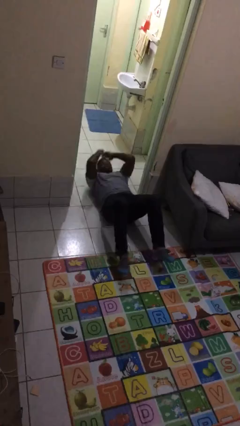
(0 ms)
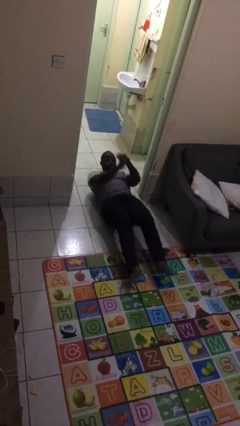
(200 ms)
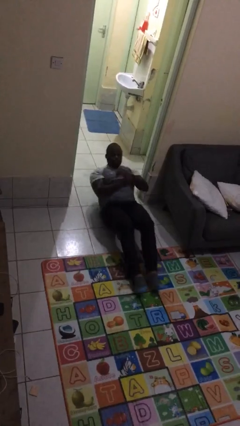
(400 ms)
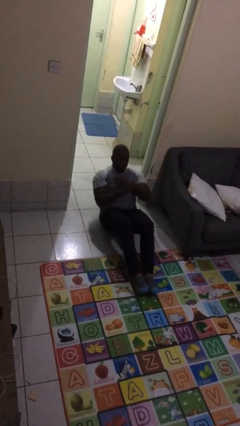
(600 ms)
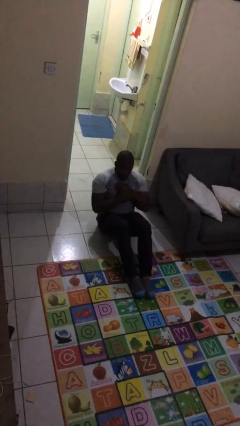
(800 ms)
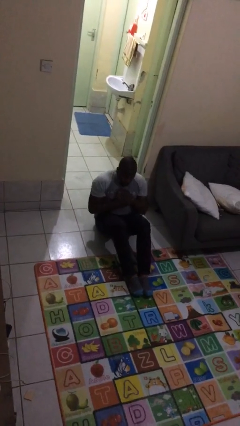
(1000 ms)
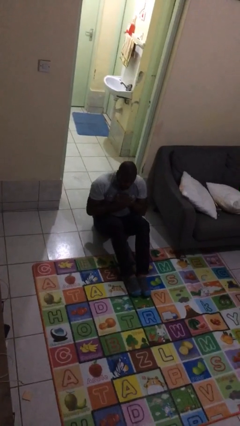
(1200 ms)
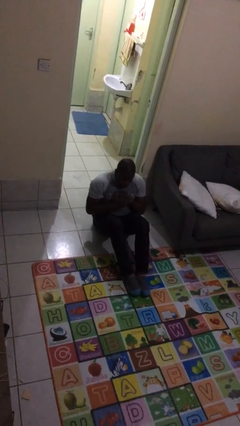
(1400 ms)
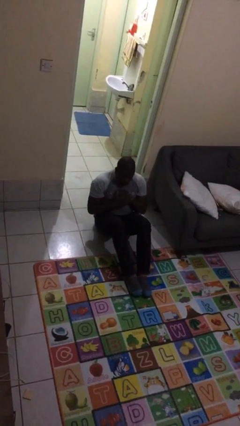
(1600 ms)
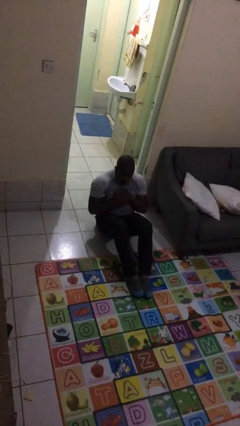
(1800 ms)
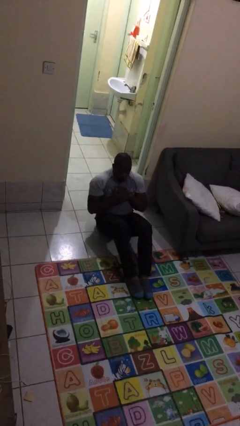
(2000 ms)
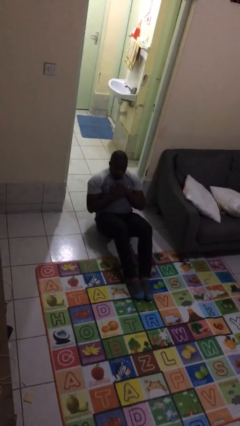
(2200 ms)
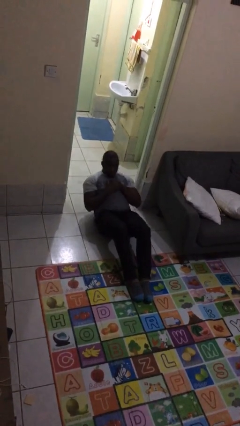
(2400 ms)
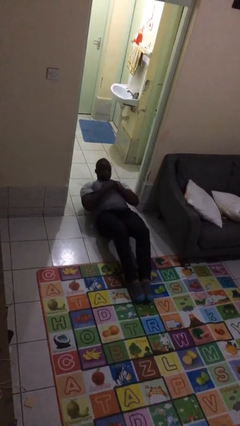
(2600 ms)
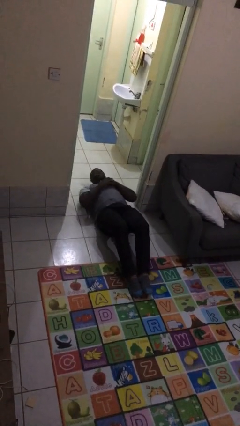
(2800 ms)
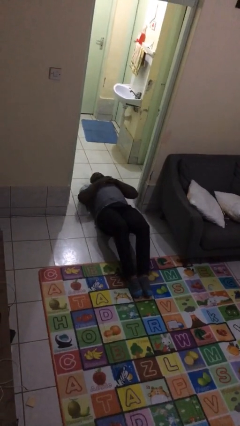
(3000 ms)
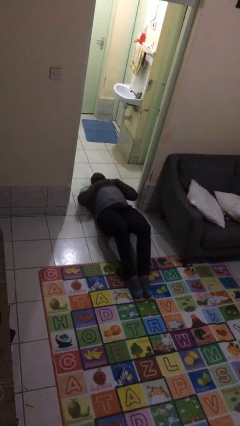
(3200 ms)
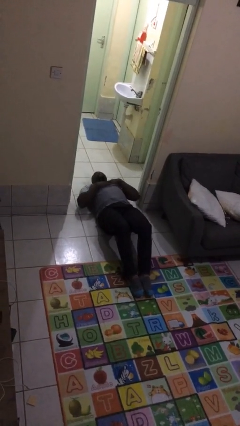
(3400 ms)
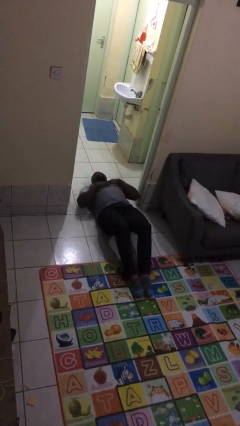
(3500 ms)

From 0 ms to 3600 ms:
person exercises with situp

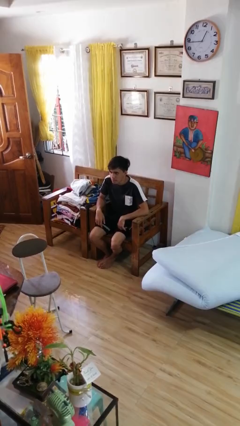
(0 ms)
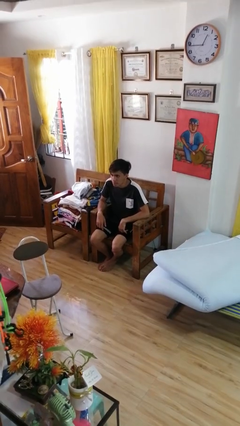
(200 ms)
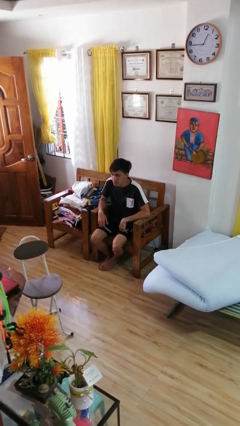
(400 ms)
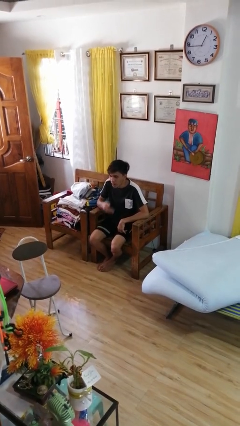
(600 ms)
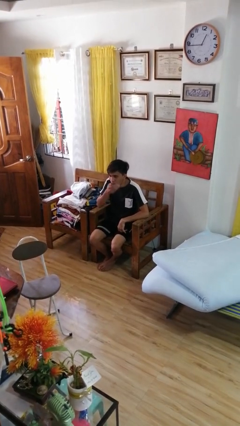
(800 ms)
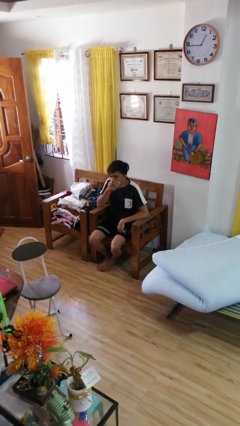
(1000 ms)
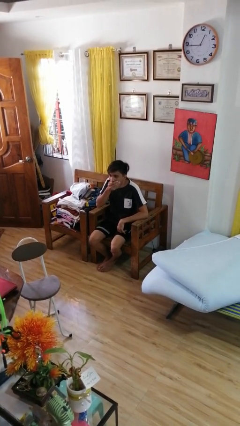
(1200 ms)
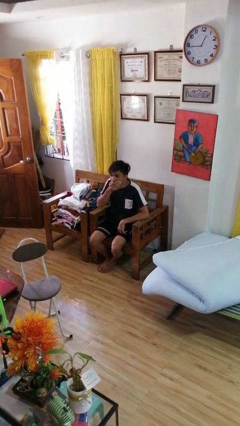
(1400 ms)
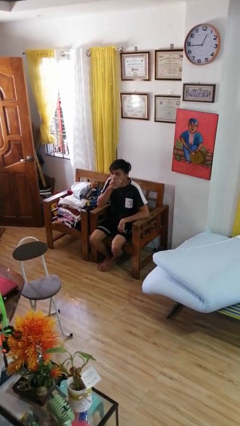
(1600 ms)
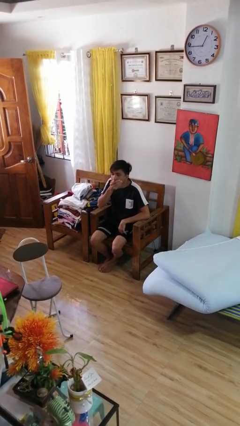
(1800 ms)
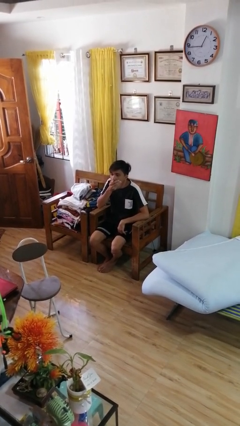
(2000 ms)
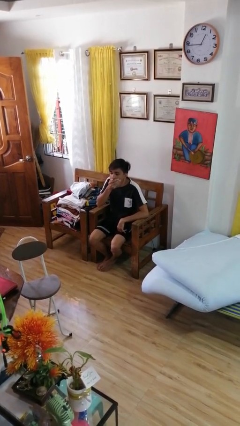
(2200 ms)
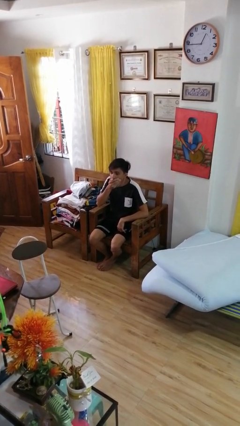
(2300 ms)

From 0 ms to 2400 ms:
person yawns

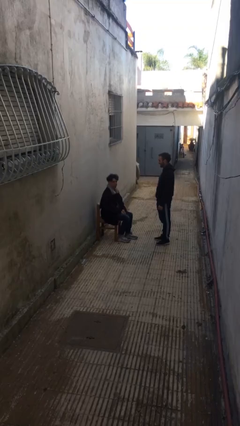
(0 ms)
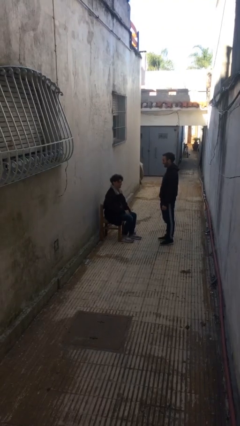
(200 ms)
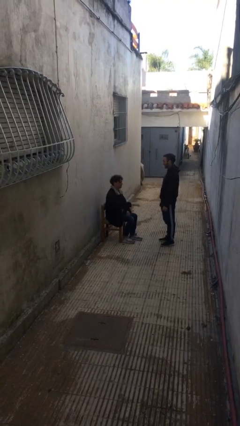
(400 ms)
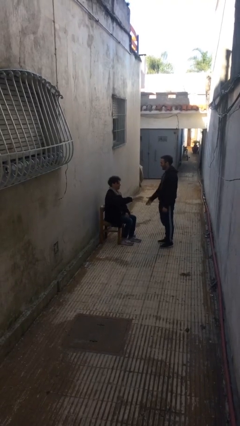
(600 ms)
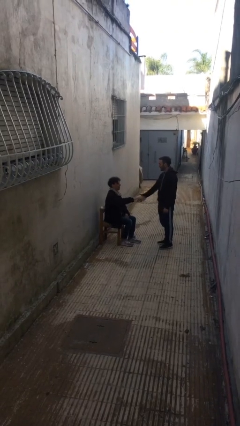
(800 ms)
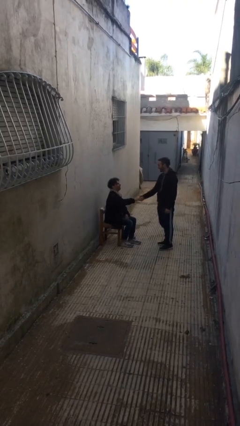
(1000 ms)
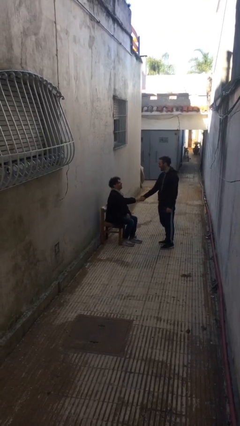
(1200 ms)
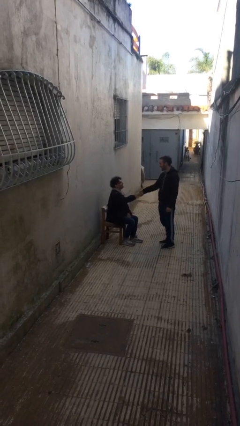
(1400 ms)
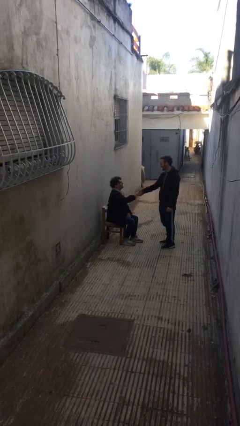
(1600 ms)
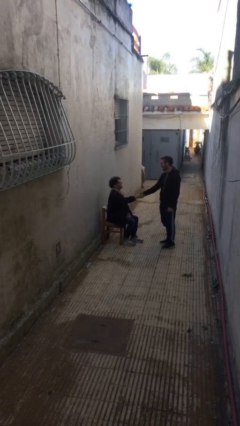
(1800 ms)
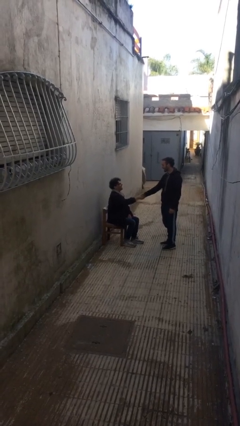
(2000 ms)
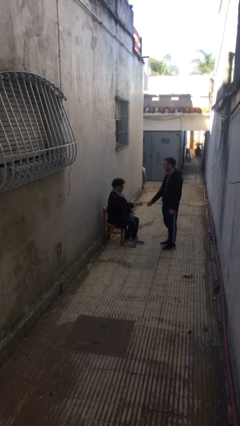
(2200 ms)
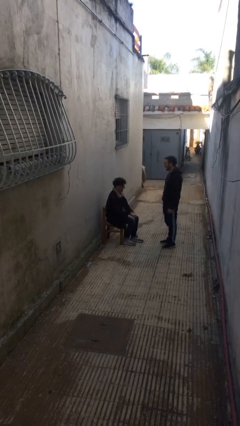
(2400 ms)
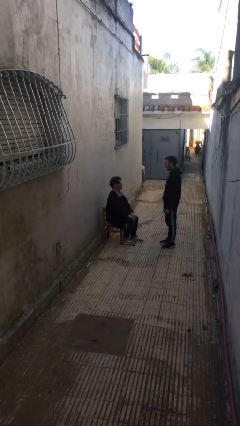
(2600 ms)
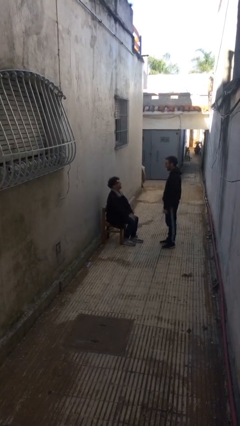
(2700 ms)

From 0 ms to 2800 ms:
person shakes hand

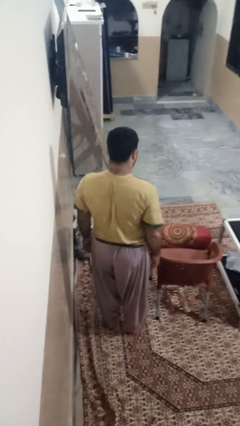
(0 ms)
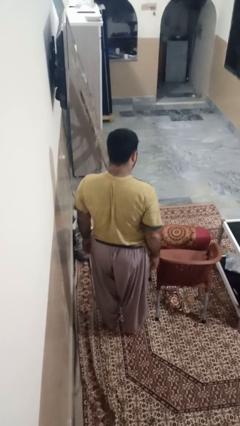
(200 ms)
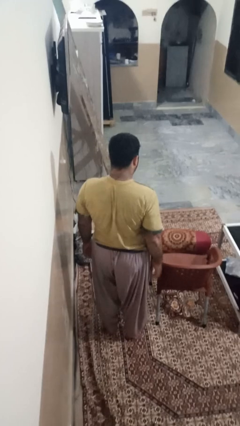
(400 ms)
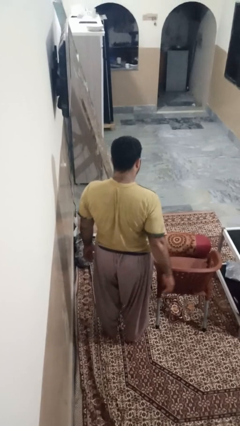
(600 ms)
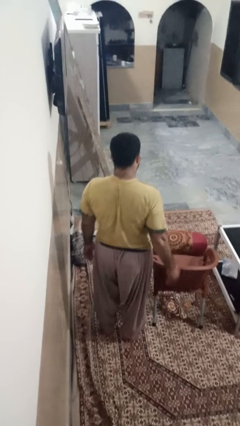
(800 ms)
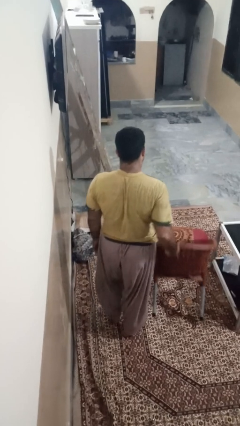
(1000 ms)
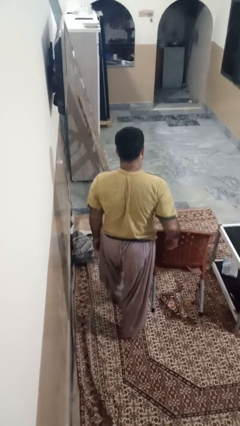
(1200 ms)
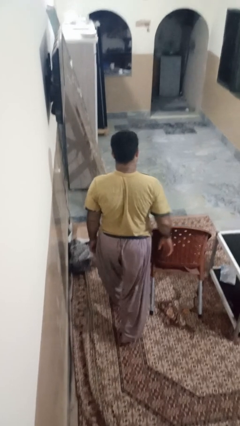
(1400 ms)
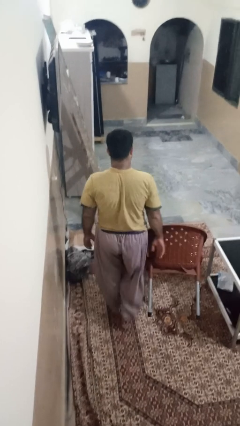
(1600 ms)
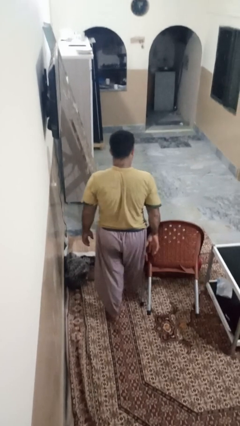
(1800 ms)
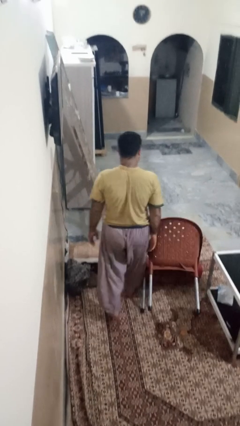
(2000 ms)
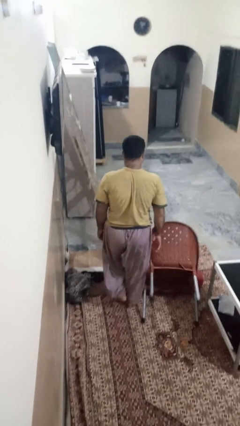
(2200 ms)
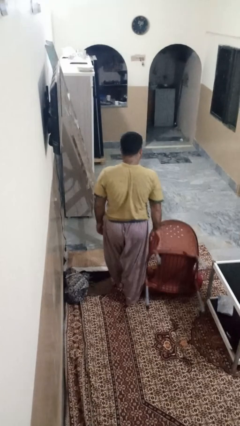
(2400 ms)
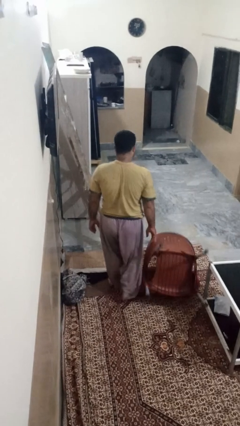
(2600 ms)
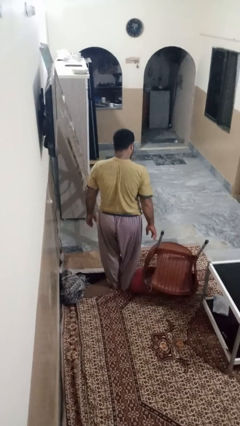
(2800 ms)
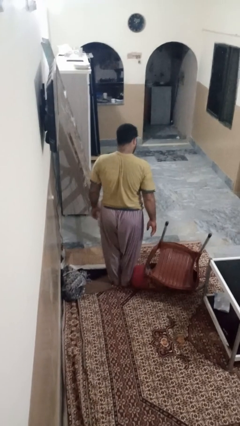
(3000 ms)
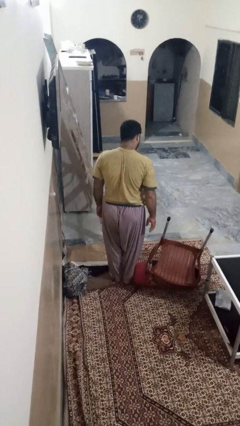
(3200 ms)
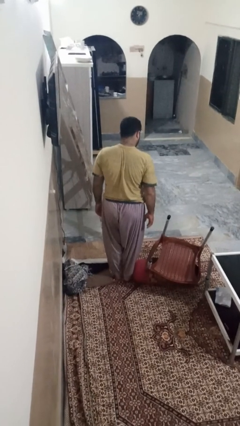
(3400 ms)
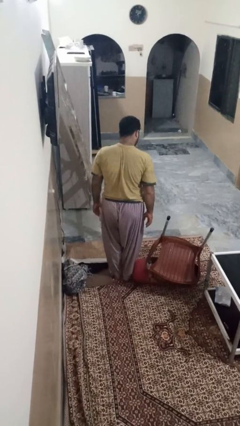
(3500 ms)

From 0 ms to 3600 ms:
person knocks over furniture

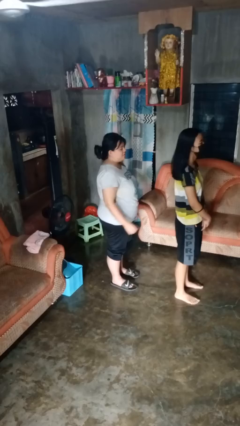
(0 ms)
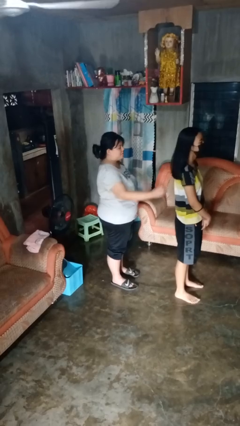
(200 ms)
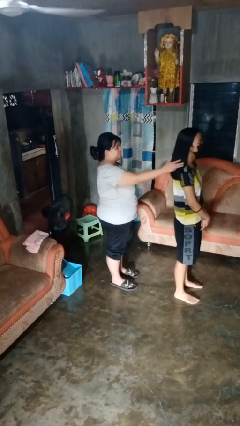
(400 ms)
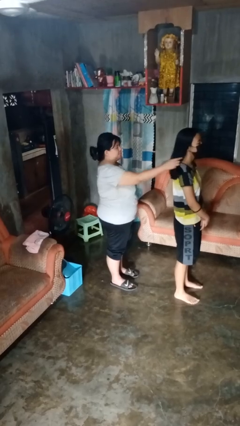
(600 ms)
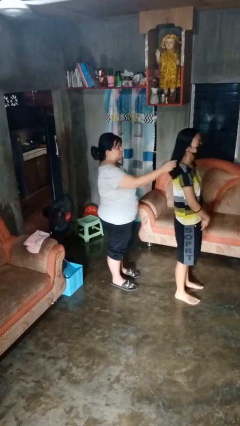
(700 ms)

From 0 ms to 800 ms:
person grabs person by hair

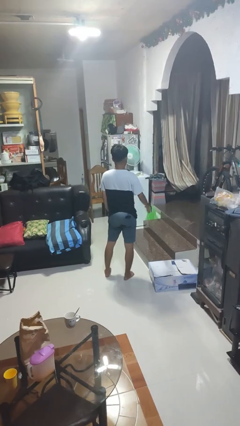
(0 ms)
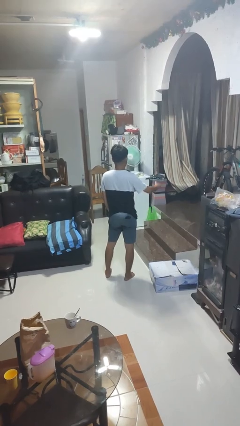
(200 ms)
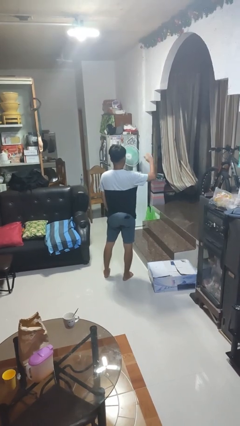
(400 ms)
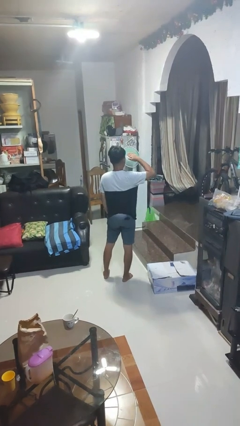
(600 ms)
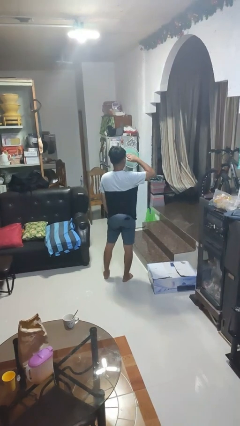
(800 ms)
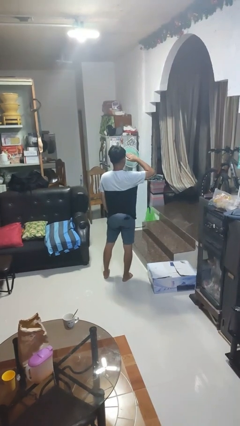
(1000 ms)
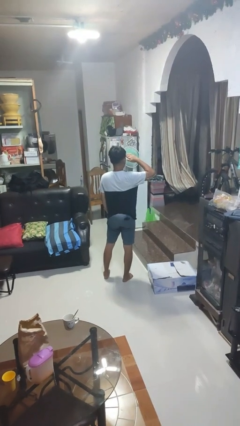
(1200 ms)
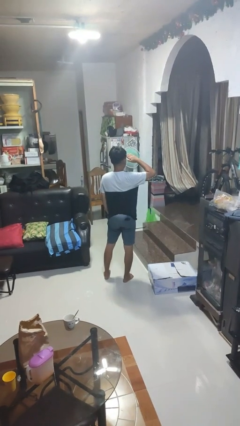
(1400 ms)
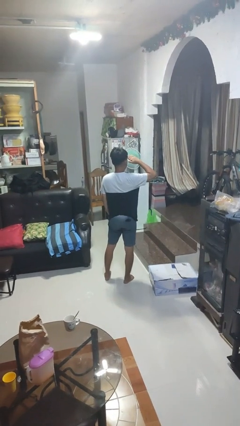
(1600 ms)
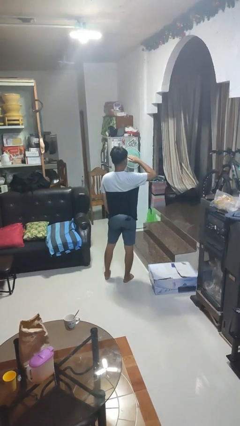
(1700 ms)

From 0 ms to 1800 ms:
person salutes

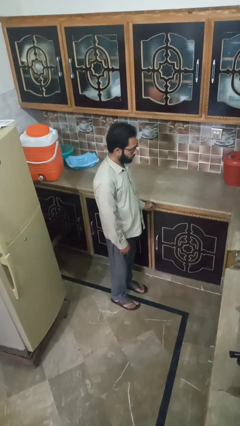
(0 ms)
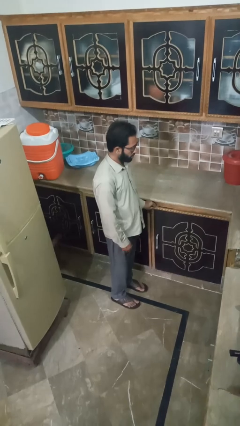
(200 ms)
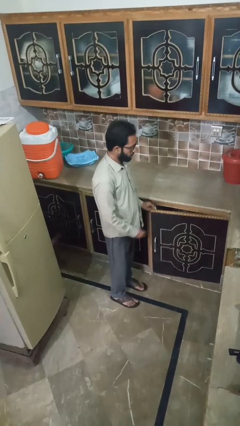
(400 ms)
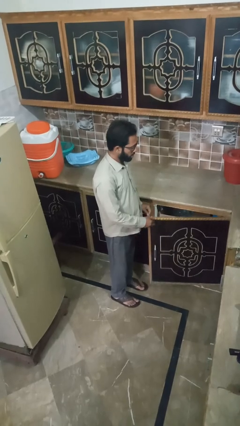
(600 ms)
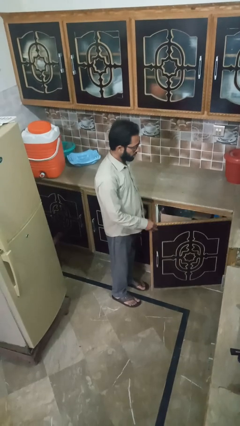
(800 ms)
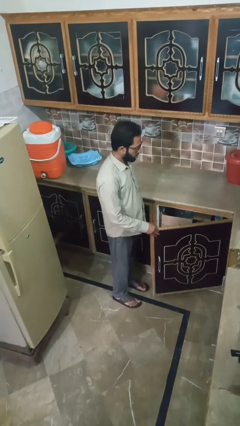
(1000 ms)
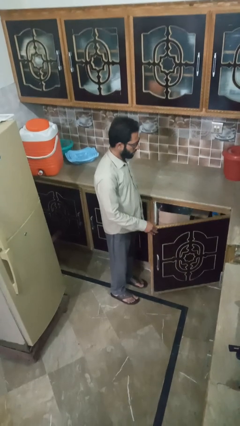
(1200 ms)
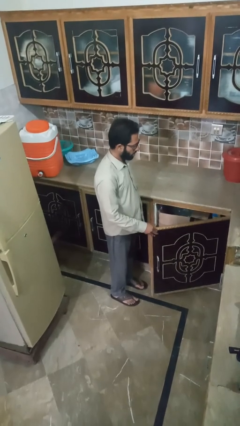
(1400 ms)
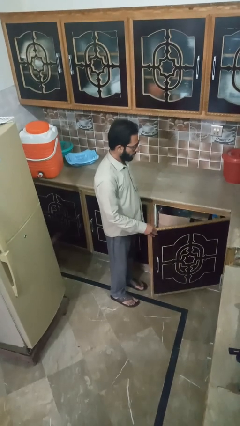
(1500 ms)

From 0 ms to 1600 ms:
person opens cabinet

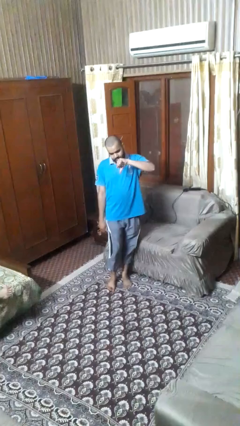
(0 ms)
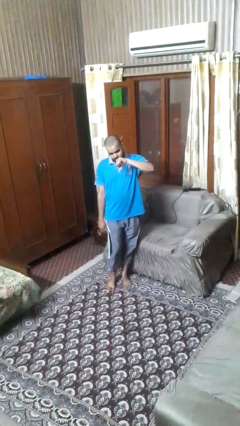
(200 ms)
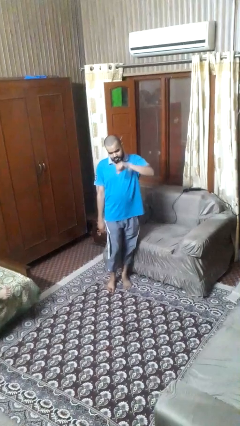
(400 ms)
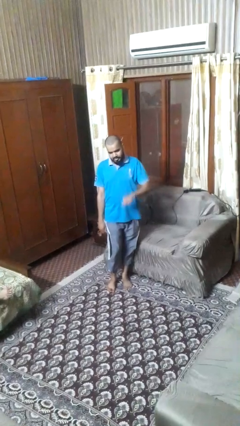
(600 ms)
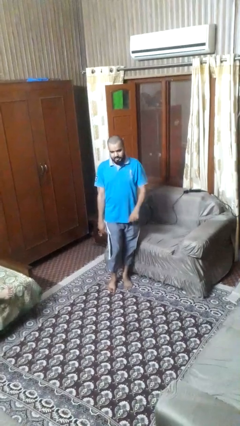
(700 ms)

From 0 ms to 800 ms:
person gestures thumbs down
